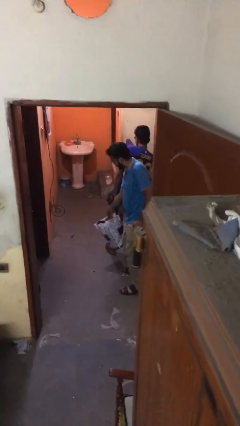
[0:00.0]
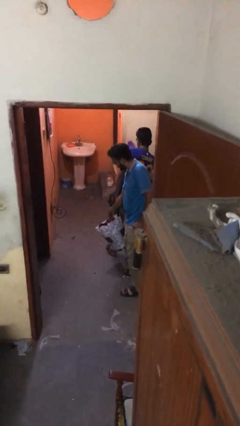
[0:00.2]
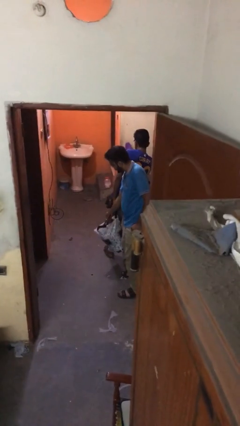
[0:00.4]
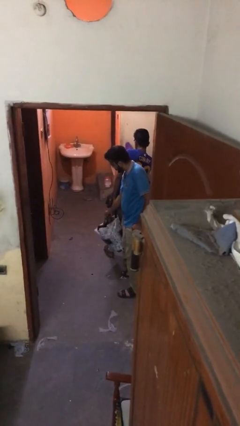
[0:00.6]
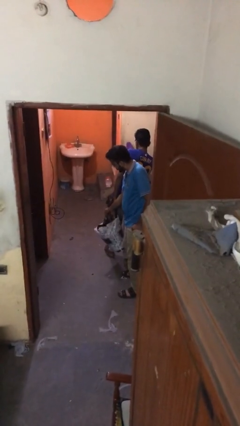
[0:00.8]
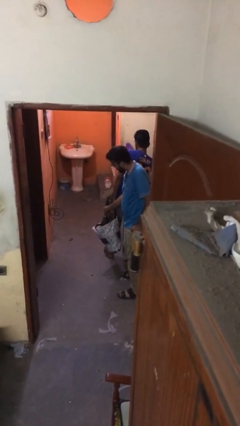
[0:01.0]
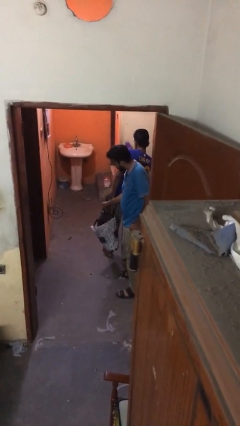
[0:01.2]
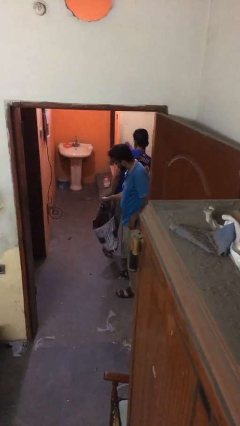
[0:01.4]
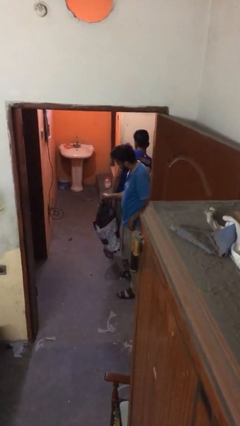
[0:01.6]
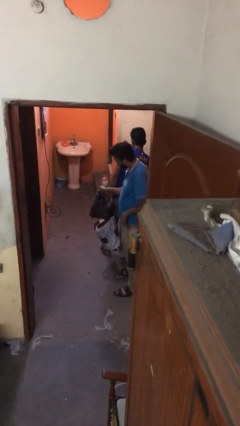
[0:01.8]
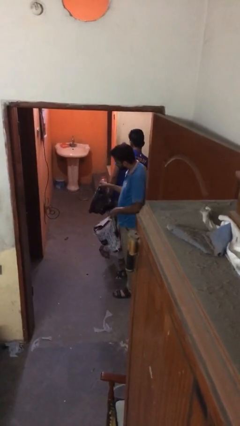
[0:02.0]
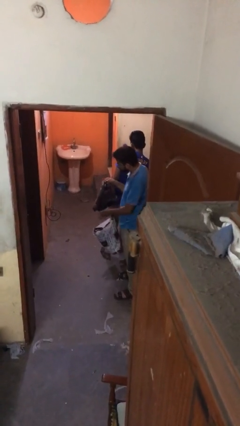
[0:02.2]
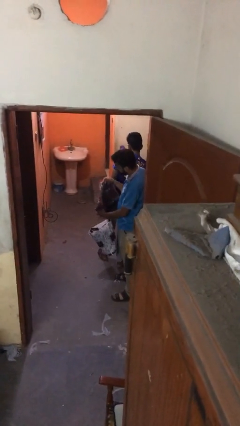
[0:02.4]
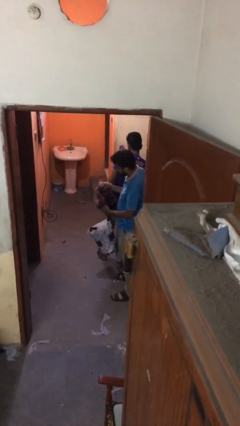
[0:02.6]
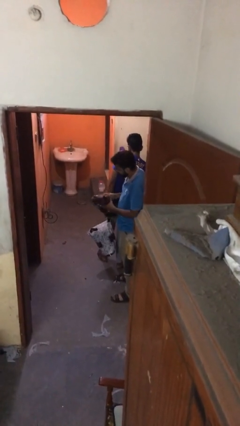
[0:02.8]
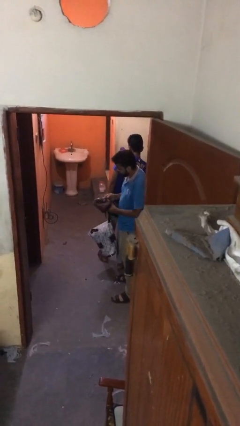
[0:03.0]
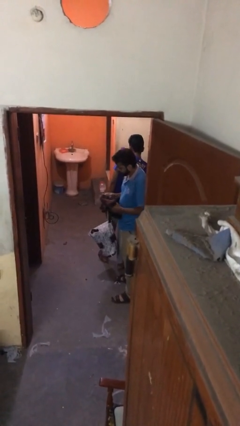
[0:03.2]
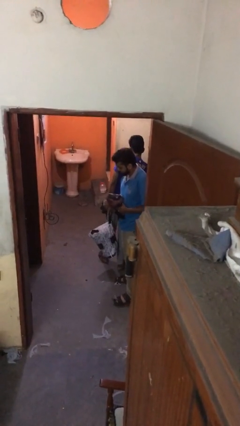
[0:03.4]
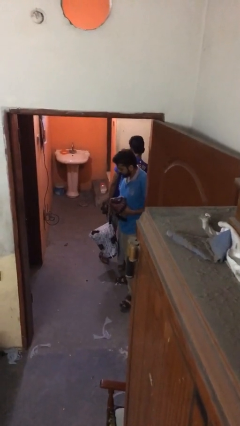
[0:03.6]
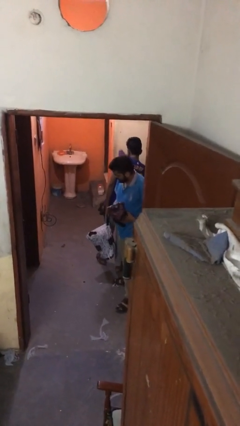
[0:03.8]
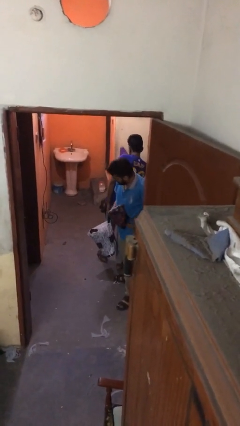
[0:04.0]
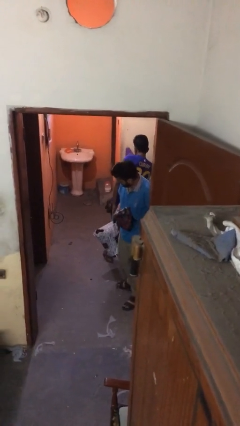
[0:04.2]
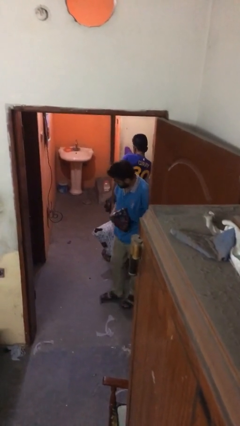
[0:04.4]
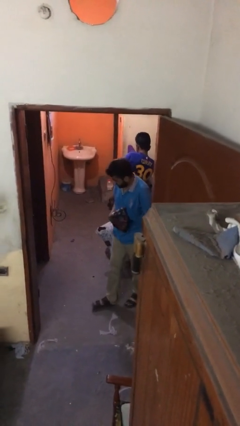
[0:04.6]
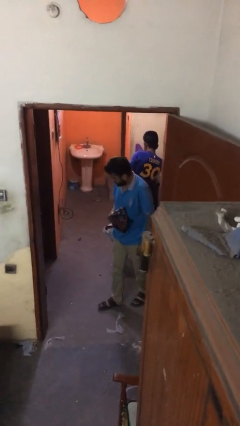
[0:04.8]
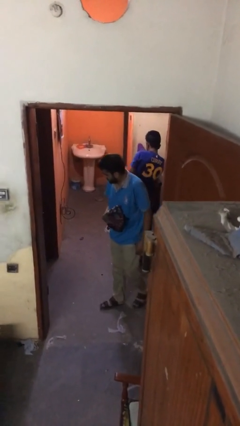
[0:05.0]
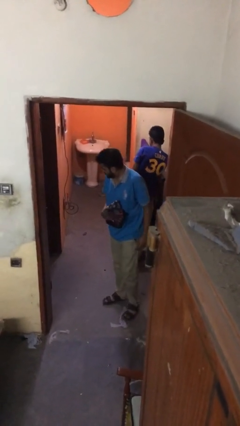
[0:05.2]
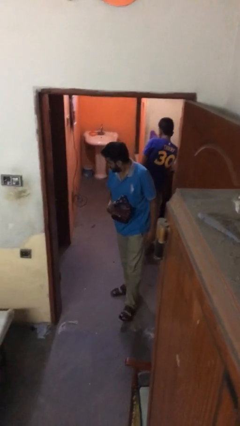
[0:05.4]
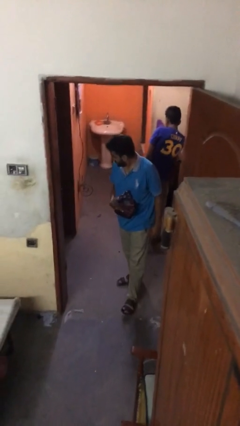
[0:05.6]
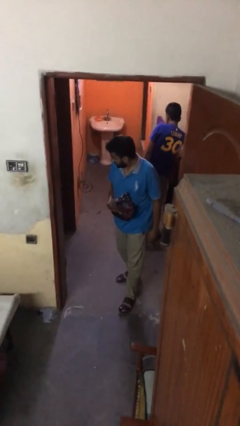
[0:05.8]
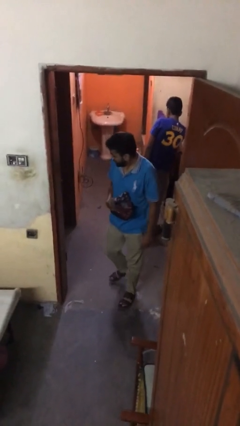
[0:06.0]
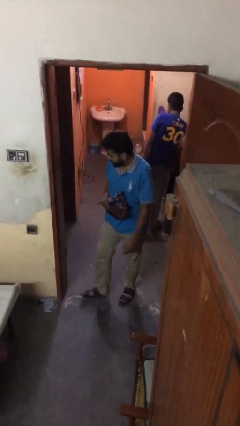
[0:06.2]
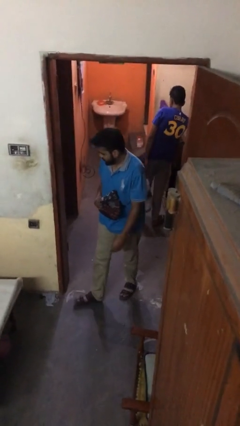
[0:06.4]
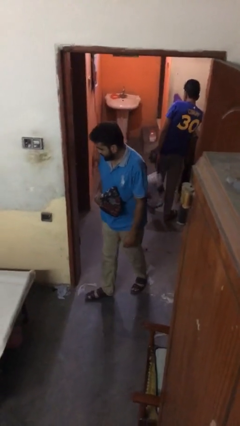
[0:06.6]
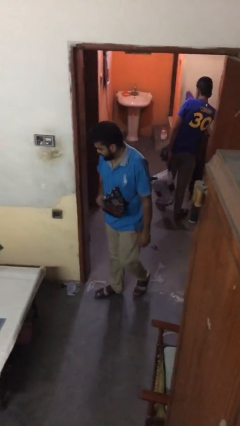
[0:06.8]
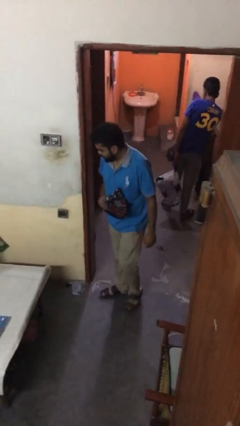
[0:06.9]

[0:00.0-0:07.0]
person steals object from person

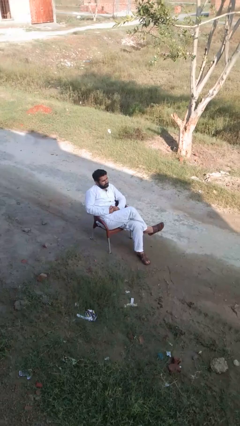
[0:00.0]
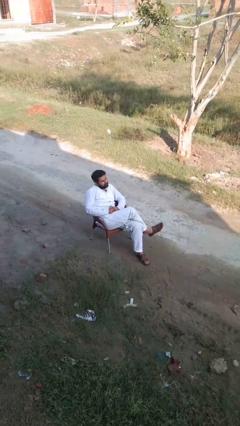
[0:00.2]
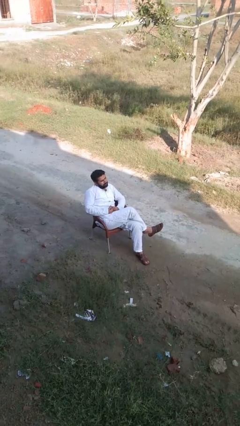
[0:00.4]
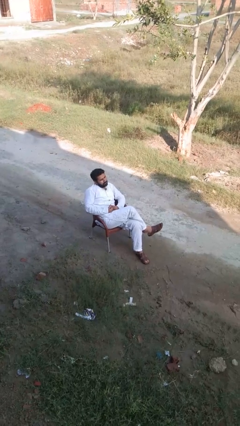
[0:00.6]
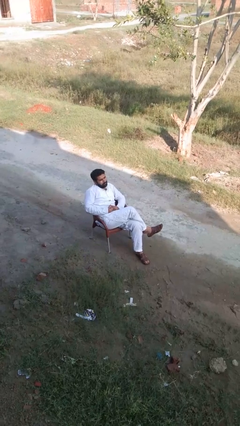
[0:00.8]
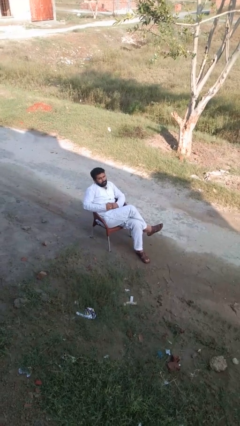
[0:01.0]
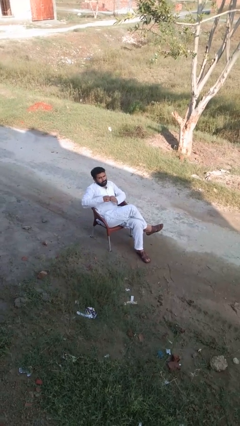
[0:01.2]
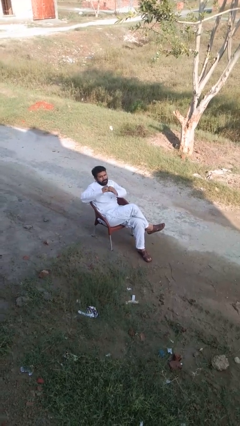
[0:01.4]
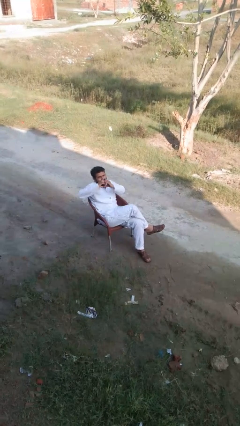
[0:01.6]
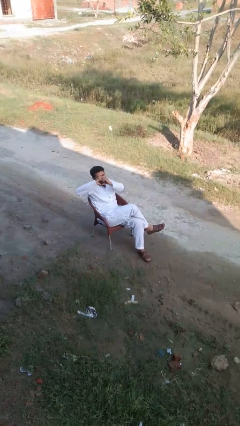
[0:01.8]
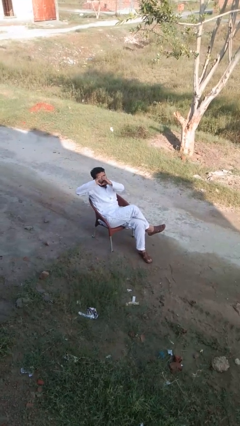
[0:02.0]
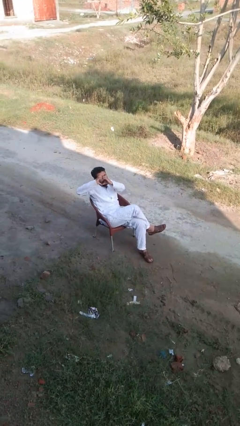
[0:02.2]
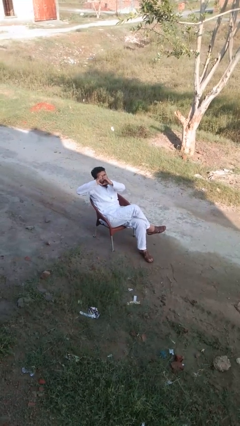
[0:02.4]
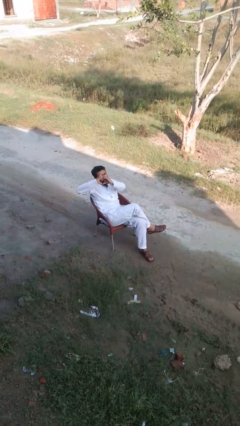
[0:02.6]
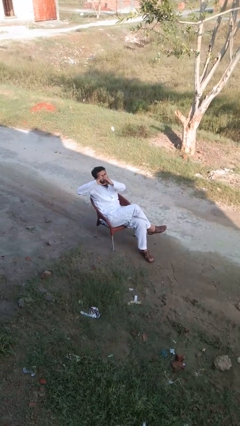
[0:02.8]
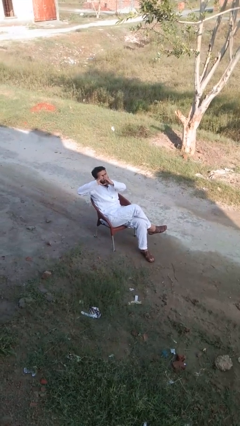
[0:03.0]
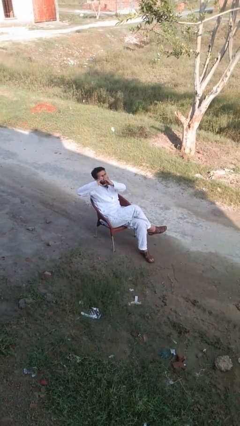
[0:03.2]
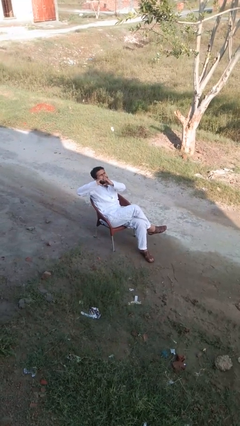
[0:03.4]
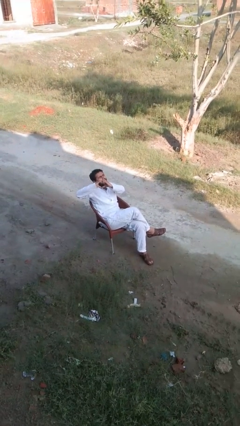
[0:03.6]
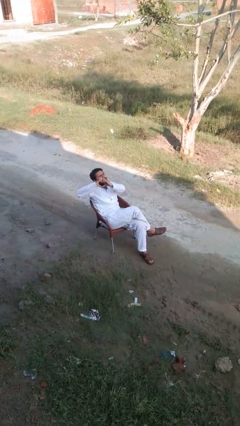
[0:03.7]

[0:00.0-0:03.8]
person gestures heart

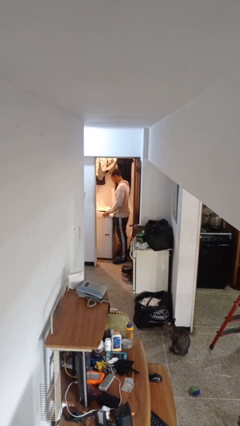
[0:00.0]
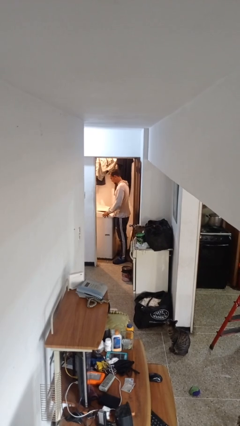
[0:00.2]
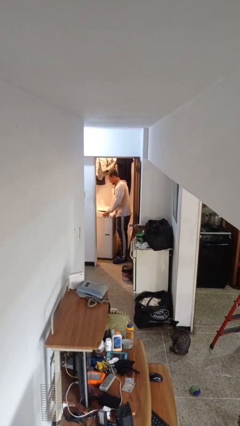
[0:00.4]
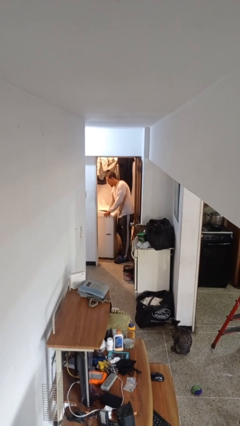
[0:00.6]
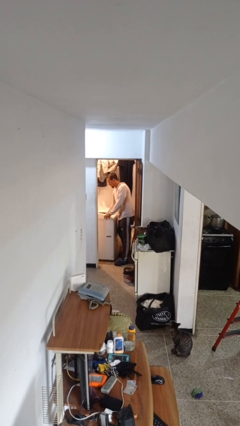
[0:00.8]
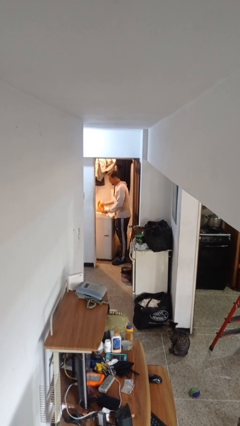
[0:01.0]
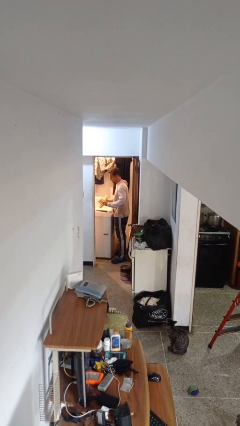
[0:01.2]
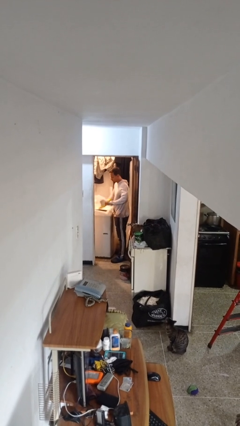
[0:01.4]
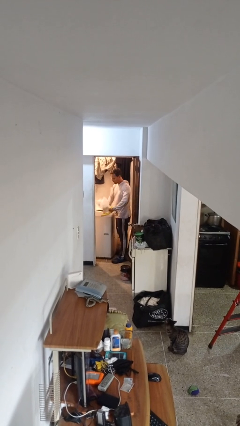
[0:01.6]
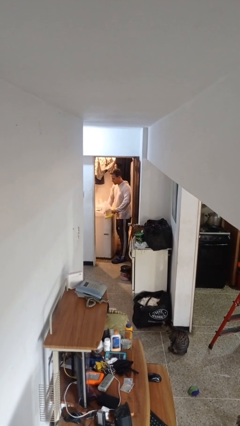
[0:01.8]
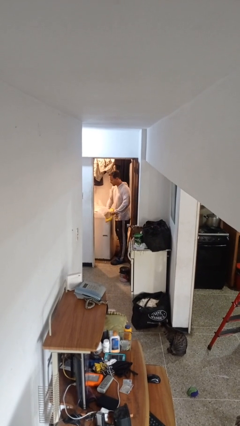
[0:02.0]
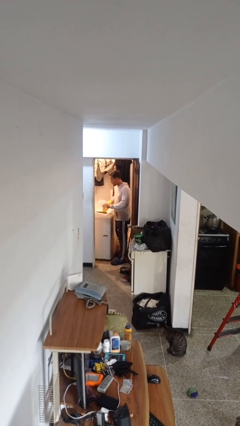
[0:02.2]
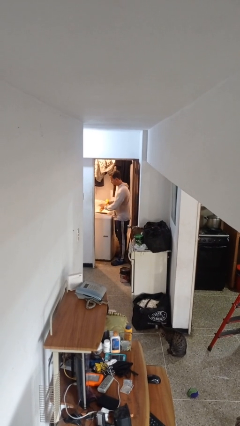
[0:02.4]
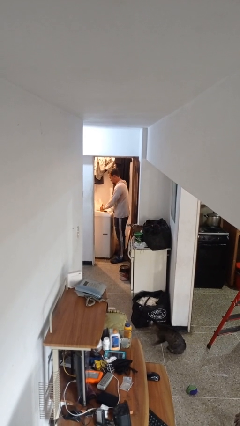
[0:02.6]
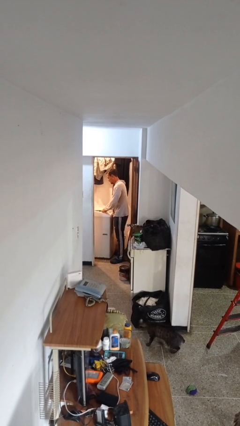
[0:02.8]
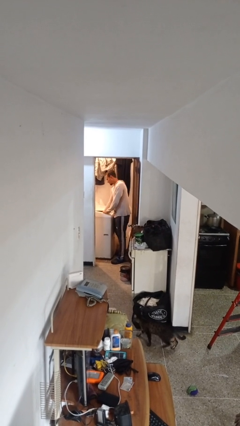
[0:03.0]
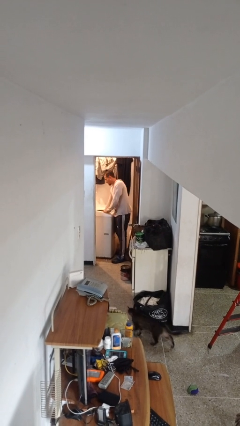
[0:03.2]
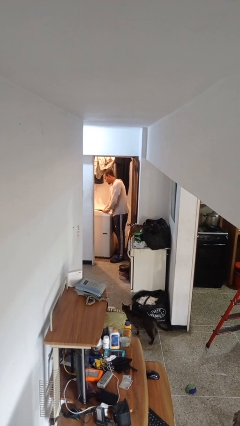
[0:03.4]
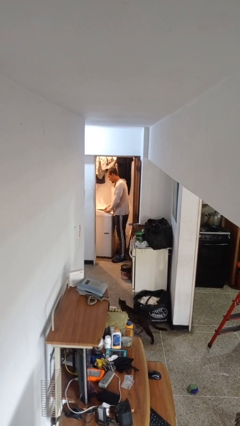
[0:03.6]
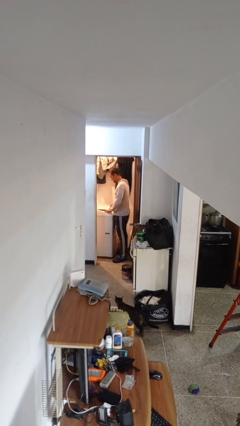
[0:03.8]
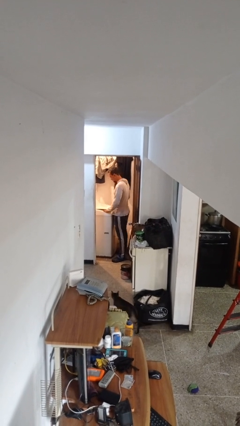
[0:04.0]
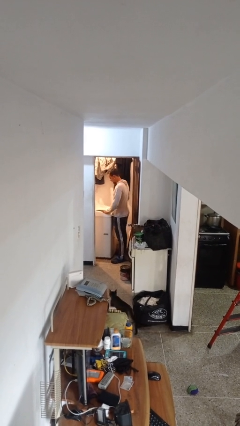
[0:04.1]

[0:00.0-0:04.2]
person cleans dryer lint trap

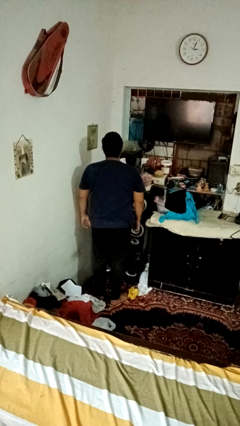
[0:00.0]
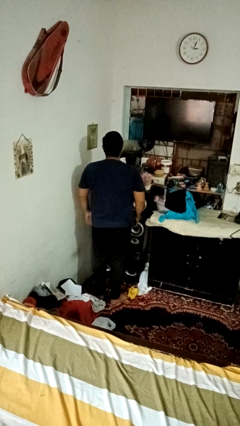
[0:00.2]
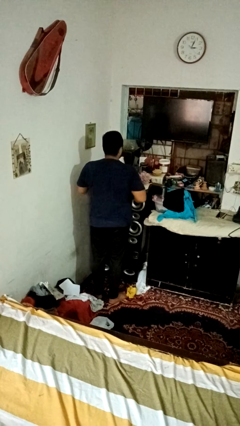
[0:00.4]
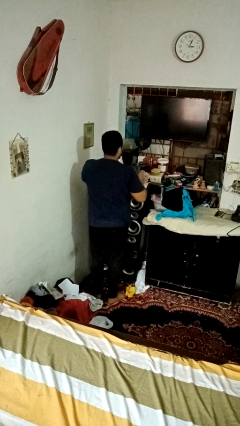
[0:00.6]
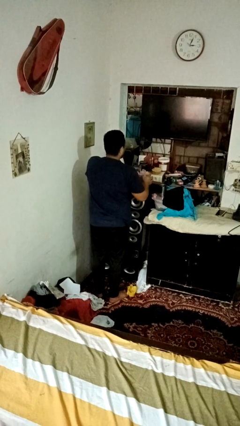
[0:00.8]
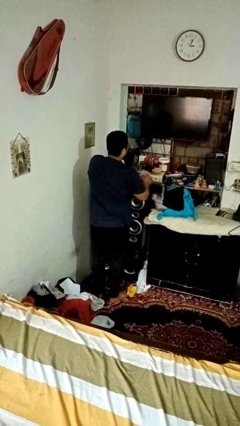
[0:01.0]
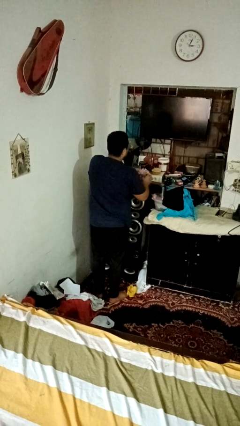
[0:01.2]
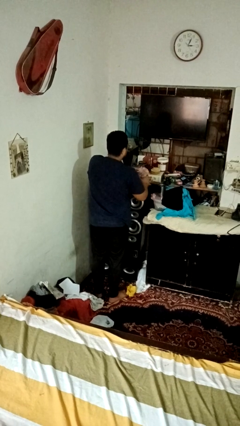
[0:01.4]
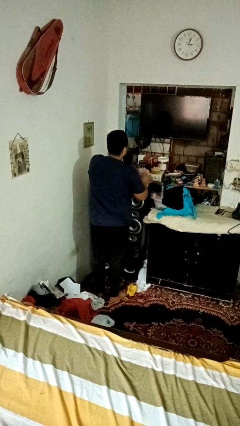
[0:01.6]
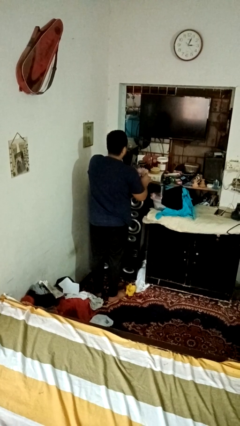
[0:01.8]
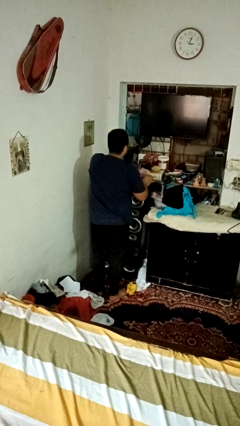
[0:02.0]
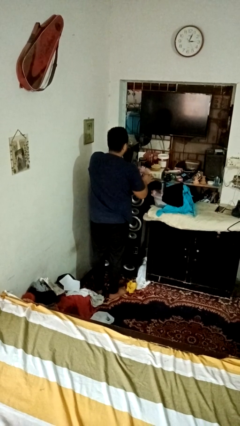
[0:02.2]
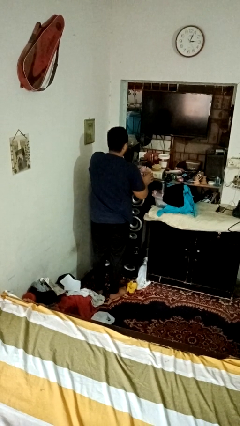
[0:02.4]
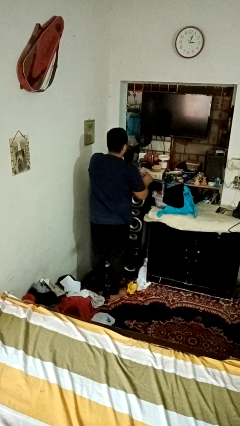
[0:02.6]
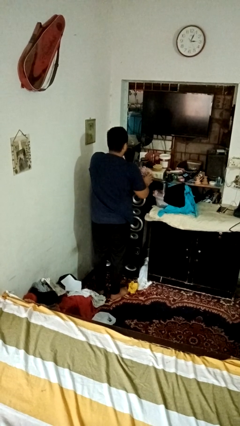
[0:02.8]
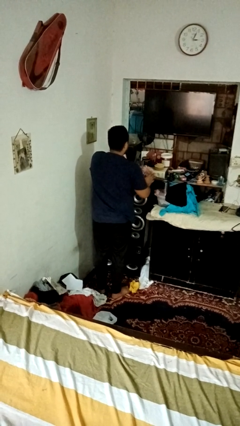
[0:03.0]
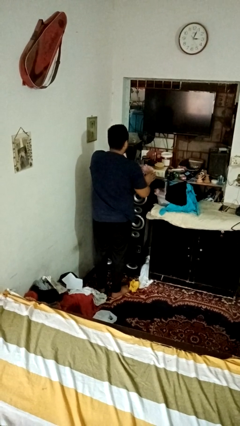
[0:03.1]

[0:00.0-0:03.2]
person arranges flowers in vase
